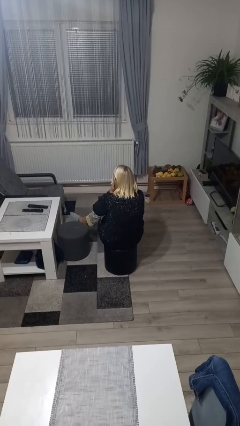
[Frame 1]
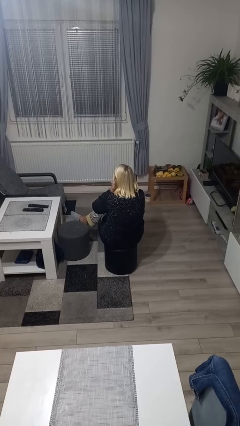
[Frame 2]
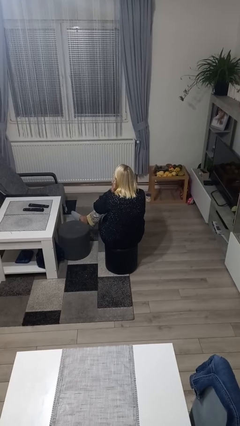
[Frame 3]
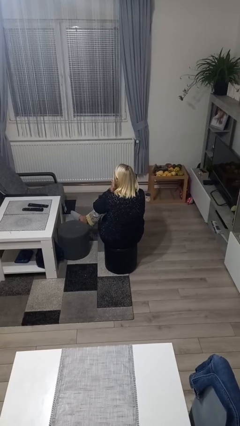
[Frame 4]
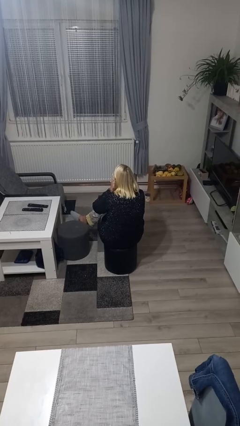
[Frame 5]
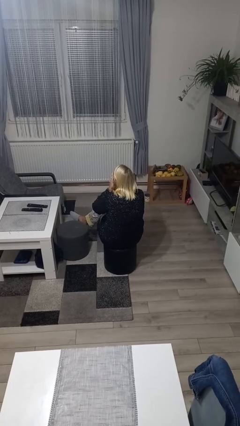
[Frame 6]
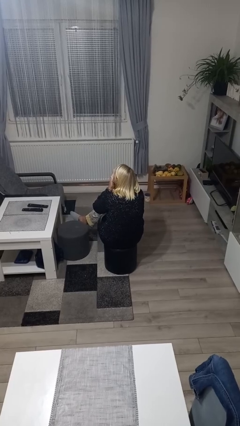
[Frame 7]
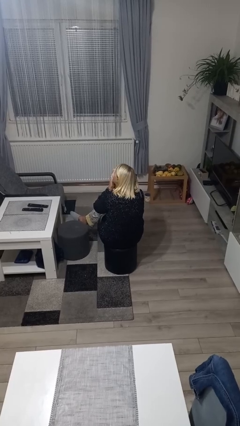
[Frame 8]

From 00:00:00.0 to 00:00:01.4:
person blows nose

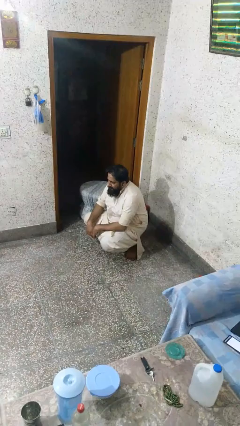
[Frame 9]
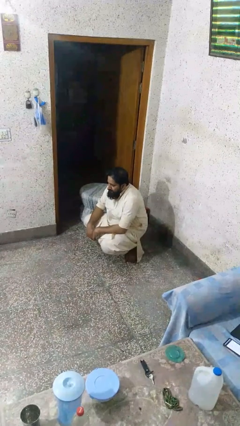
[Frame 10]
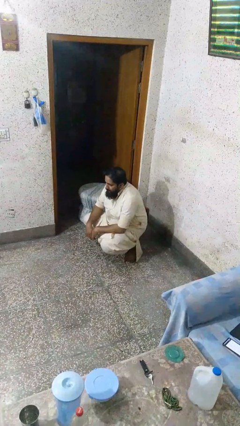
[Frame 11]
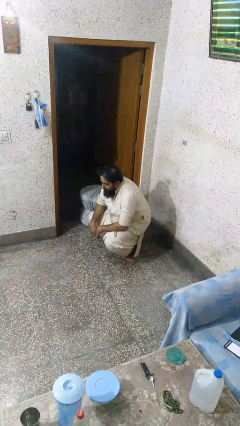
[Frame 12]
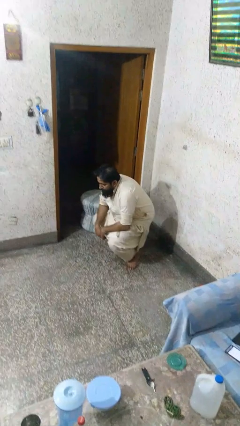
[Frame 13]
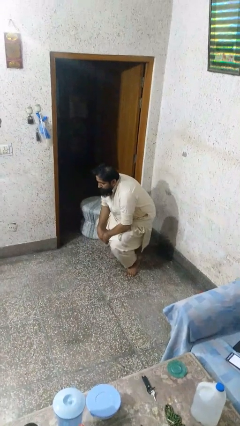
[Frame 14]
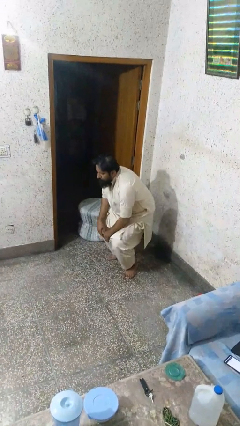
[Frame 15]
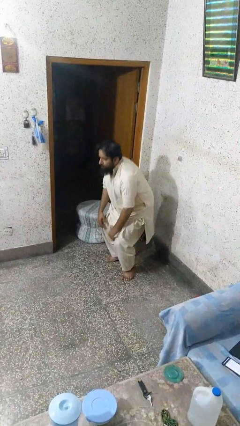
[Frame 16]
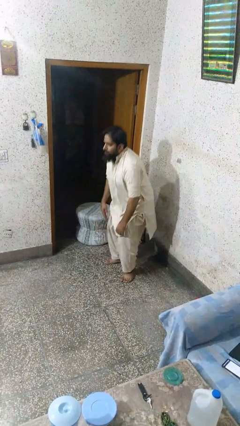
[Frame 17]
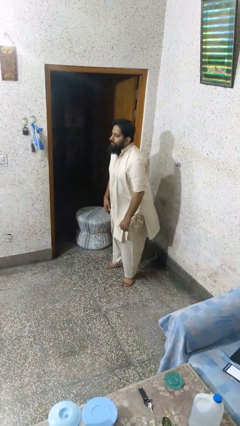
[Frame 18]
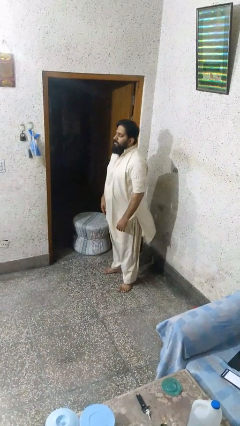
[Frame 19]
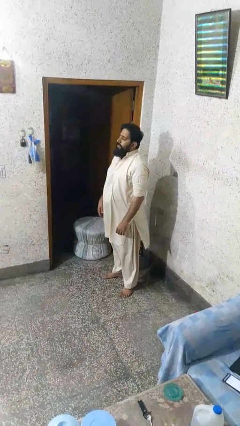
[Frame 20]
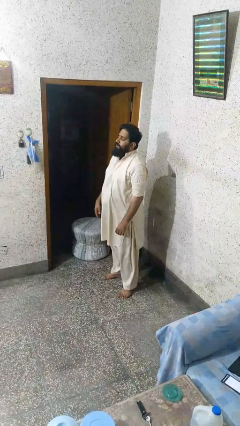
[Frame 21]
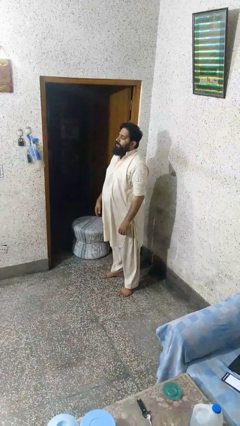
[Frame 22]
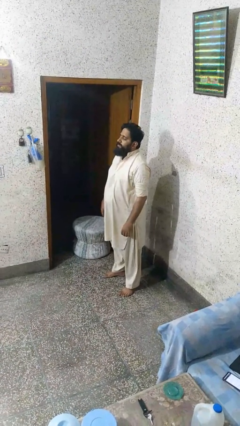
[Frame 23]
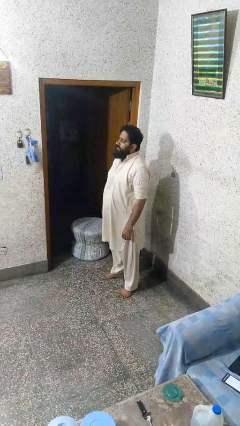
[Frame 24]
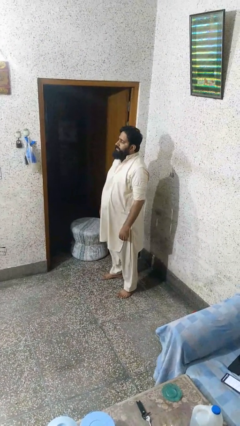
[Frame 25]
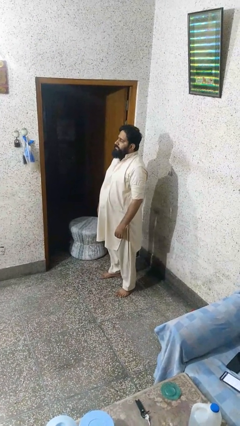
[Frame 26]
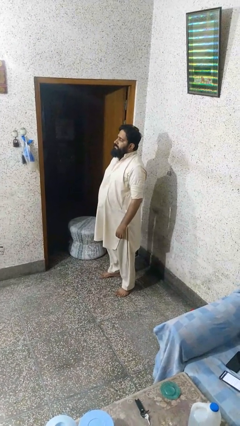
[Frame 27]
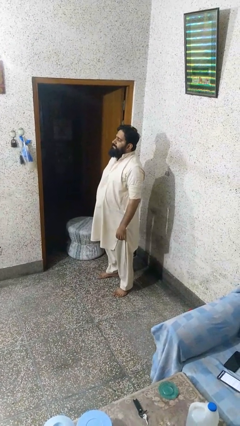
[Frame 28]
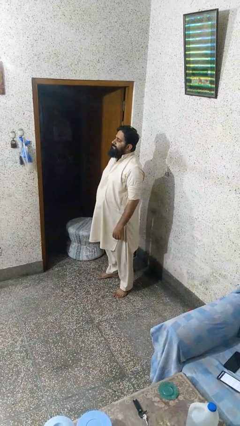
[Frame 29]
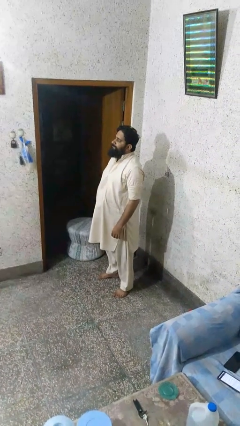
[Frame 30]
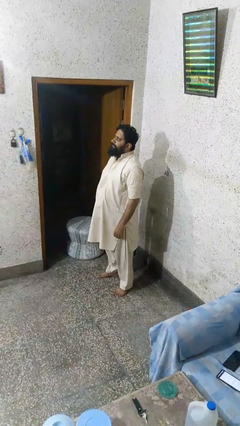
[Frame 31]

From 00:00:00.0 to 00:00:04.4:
person stands up

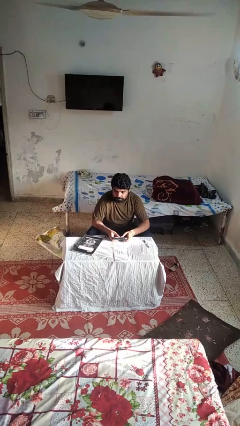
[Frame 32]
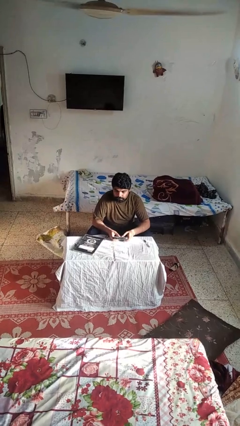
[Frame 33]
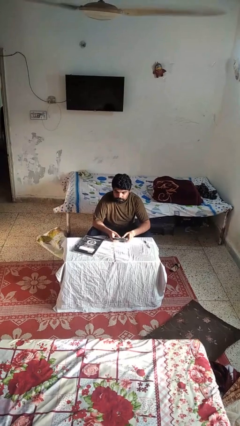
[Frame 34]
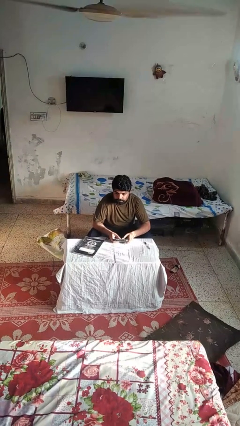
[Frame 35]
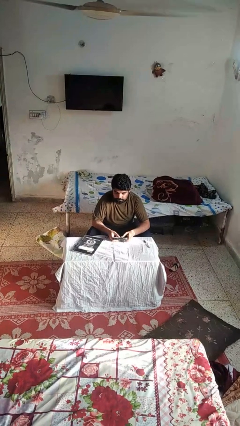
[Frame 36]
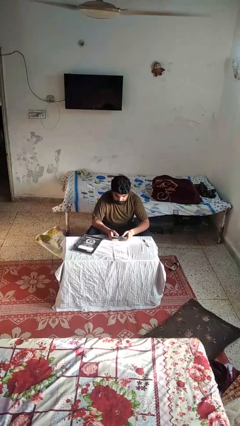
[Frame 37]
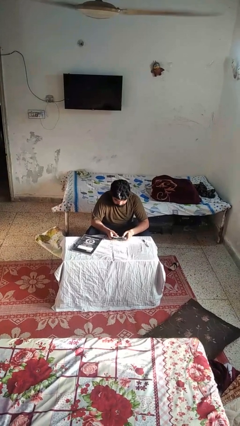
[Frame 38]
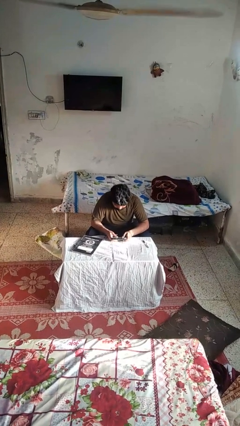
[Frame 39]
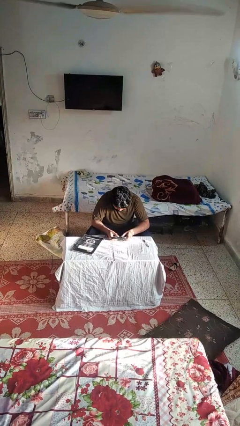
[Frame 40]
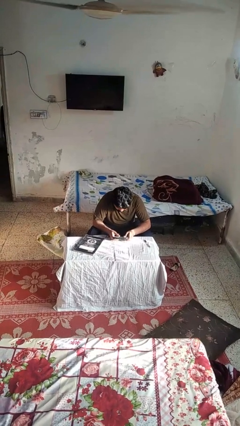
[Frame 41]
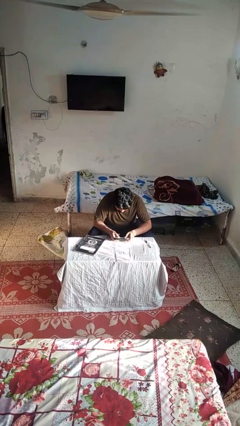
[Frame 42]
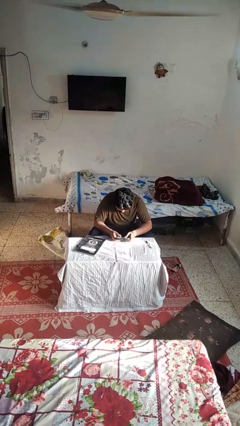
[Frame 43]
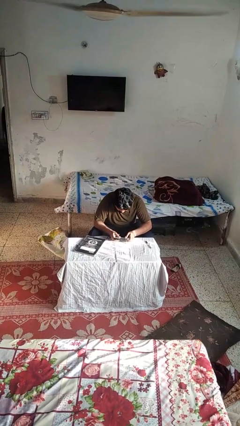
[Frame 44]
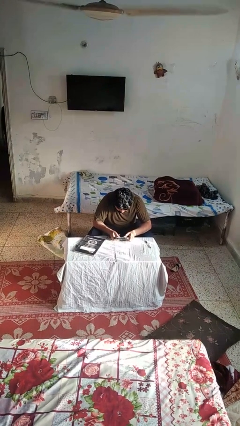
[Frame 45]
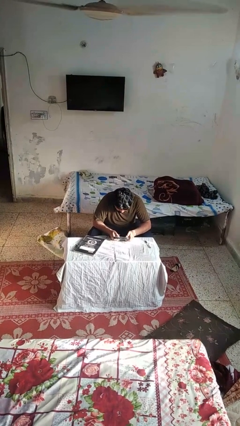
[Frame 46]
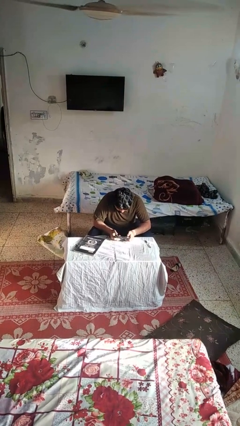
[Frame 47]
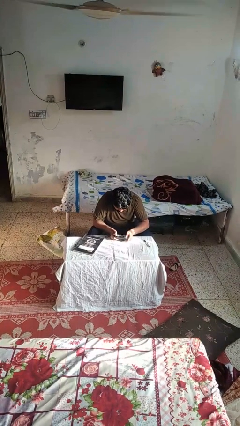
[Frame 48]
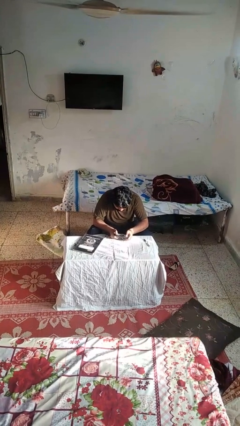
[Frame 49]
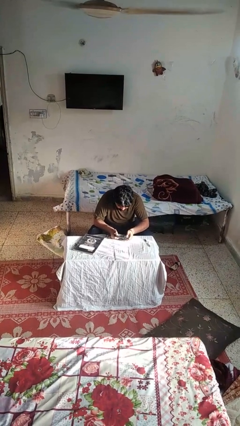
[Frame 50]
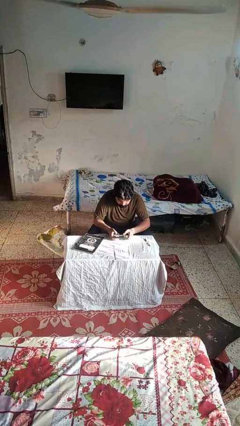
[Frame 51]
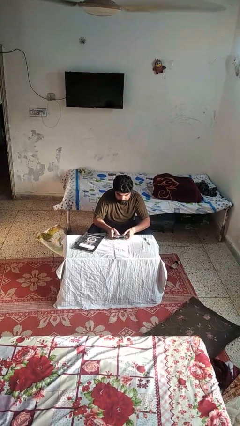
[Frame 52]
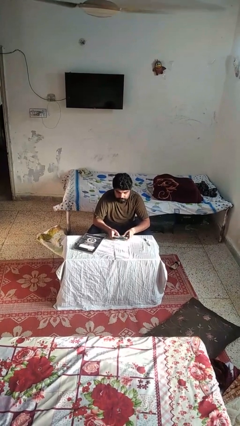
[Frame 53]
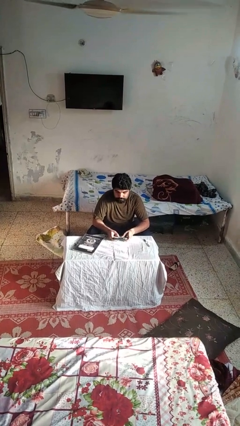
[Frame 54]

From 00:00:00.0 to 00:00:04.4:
person interacts with handheld game

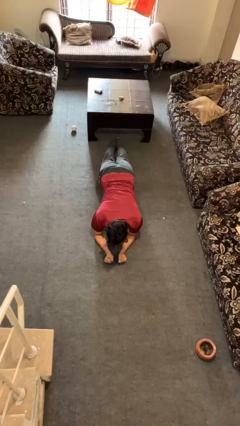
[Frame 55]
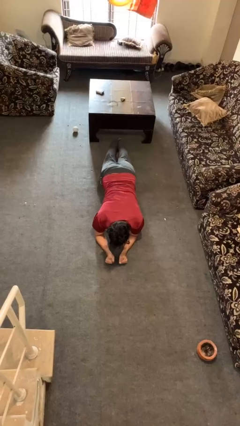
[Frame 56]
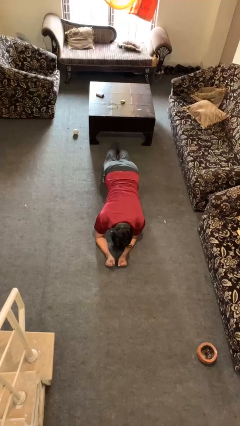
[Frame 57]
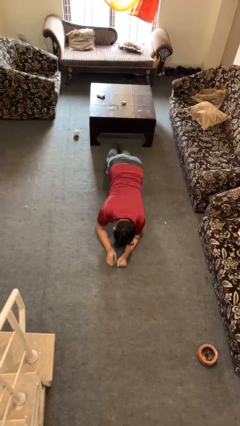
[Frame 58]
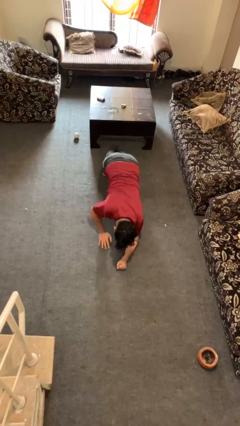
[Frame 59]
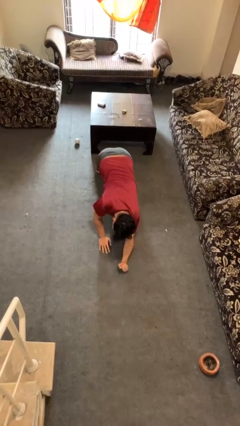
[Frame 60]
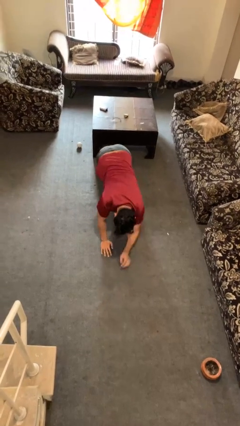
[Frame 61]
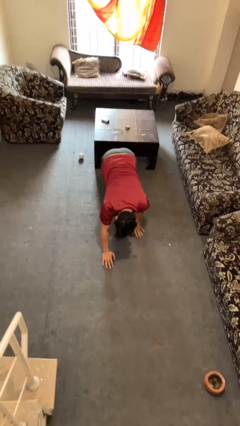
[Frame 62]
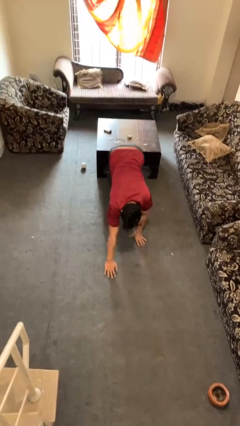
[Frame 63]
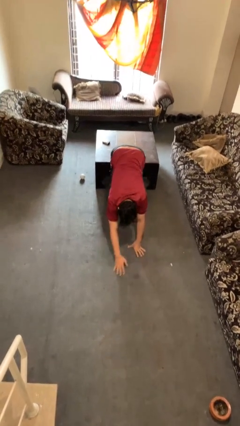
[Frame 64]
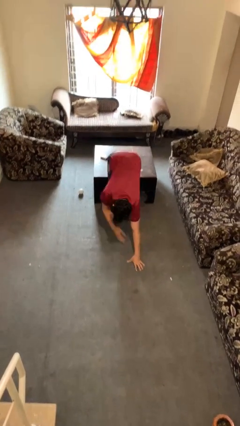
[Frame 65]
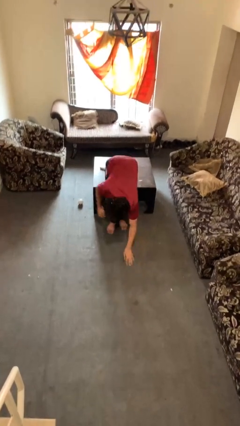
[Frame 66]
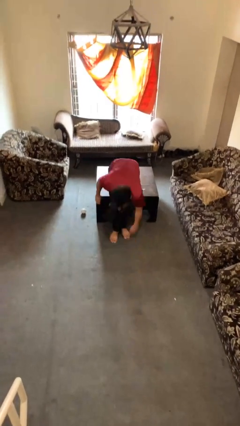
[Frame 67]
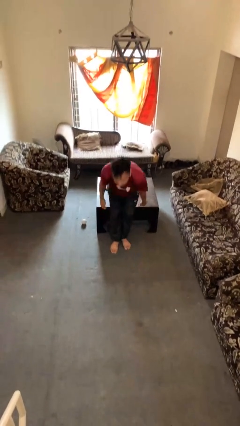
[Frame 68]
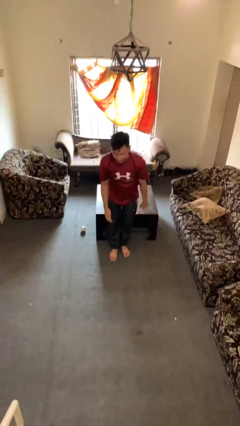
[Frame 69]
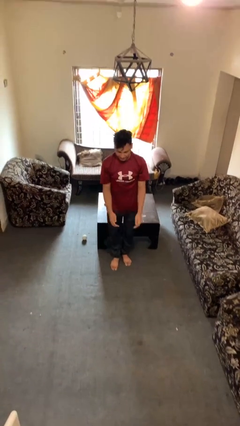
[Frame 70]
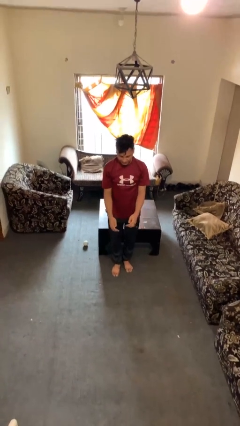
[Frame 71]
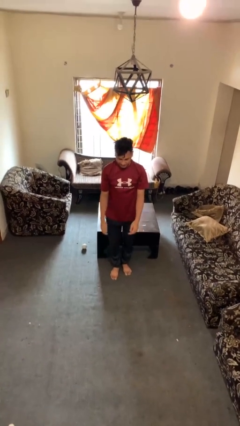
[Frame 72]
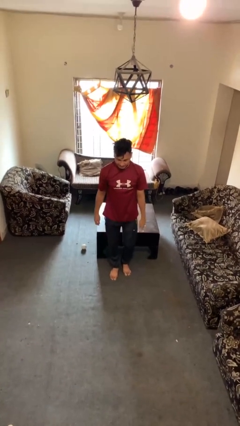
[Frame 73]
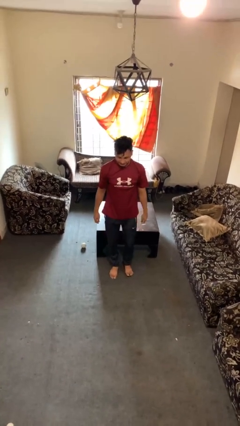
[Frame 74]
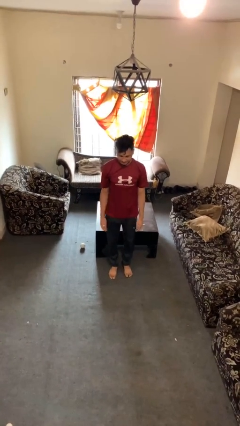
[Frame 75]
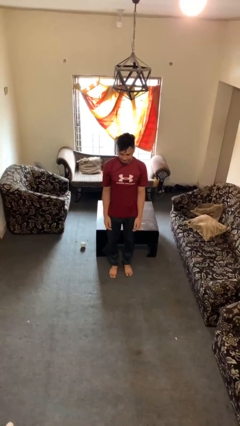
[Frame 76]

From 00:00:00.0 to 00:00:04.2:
person stands up from floor

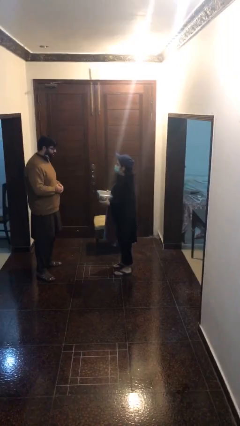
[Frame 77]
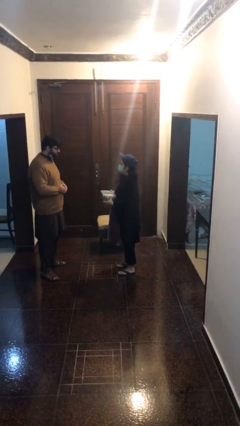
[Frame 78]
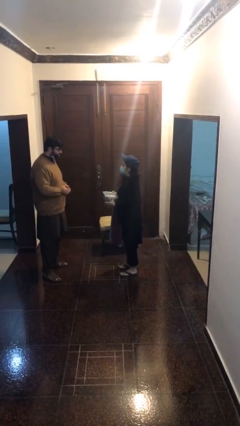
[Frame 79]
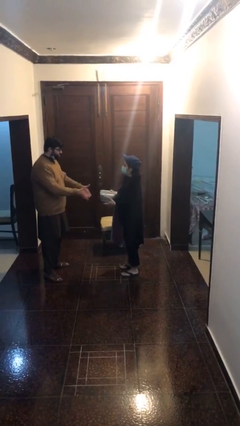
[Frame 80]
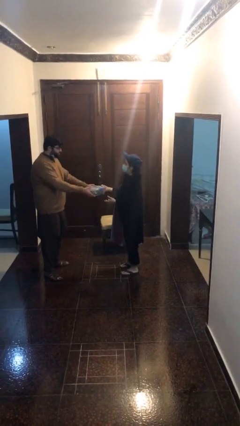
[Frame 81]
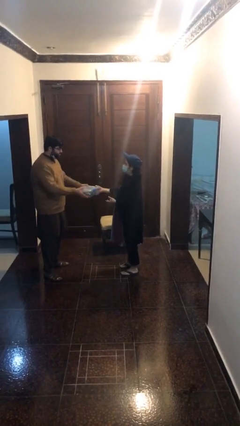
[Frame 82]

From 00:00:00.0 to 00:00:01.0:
person transfers object to person

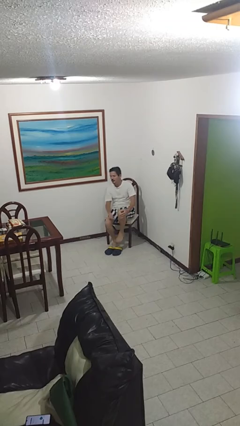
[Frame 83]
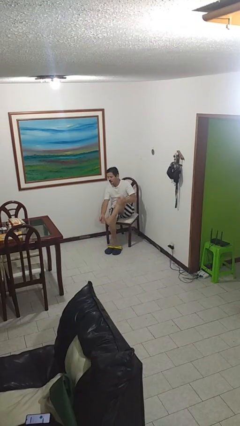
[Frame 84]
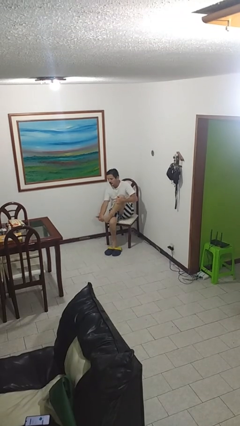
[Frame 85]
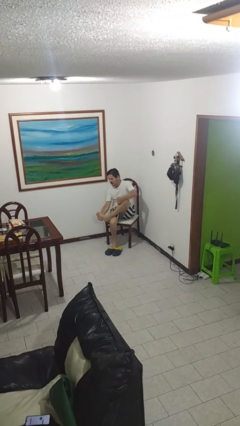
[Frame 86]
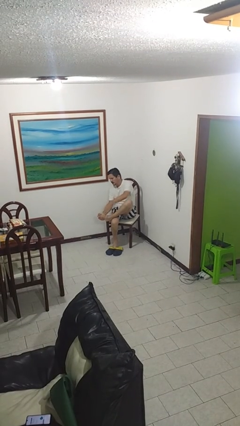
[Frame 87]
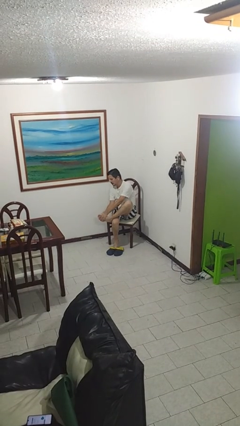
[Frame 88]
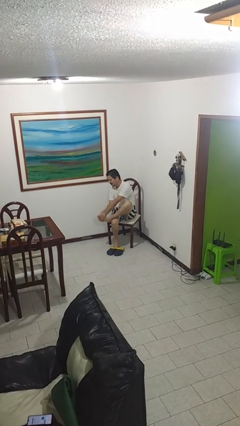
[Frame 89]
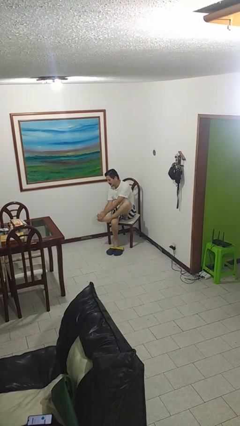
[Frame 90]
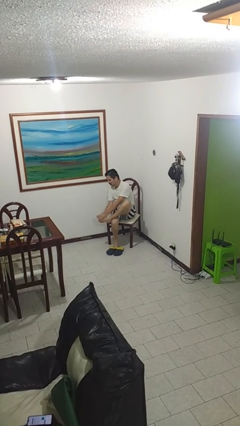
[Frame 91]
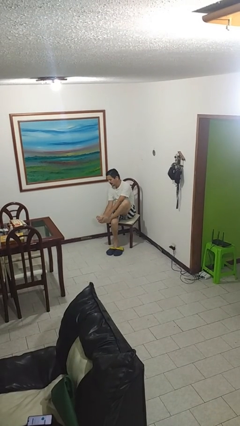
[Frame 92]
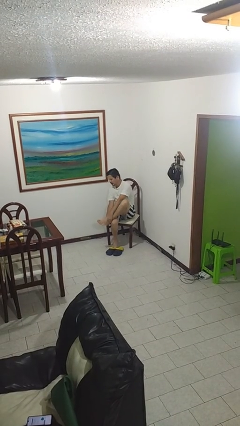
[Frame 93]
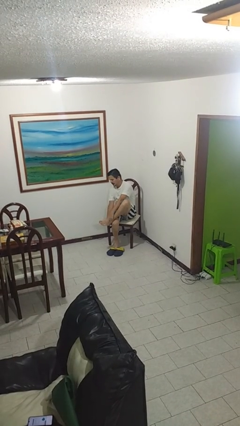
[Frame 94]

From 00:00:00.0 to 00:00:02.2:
person rubs foot
